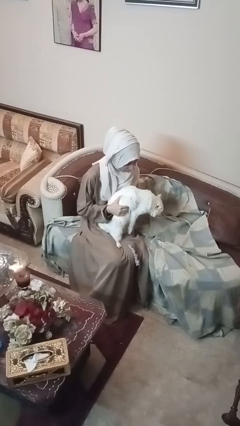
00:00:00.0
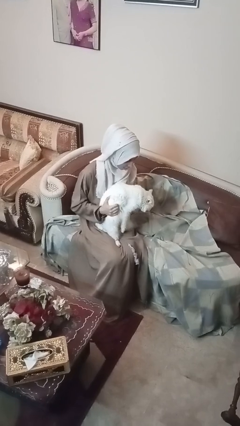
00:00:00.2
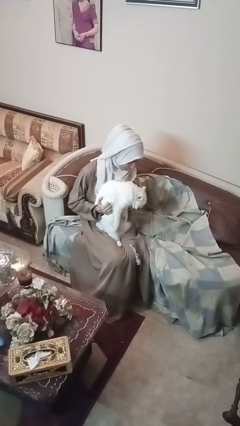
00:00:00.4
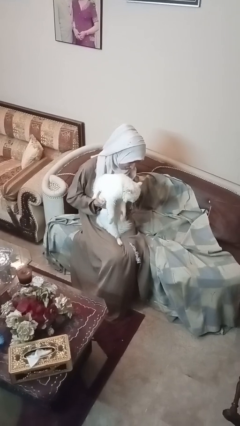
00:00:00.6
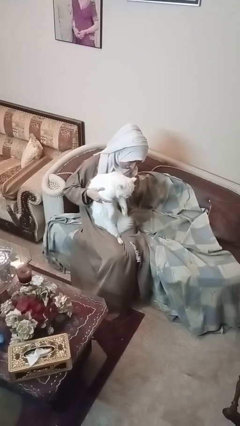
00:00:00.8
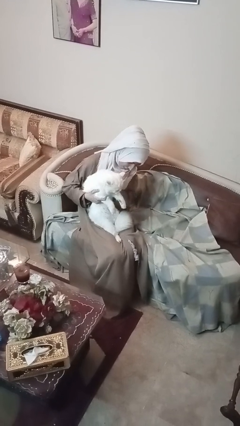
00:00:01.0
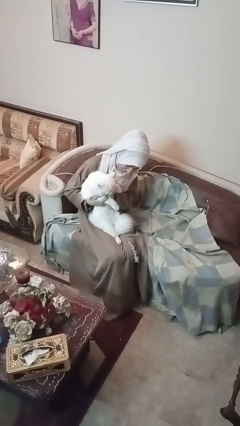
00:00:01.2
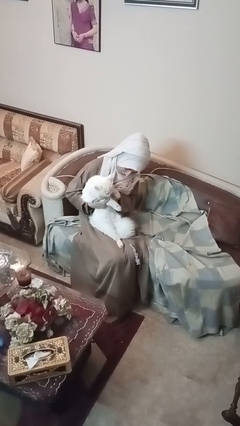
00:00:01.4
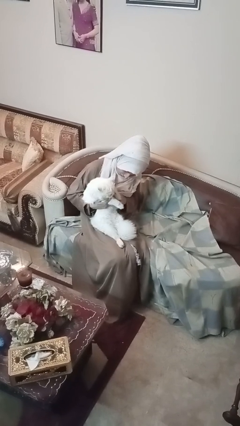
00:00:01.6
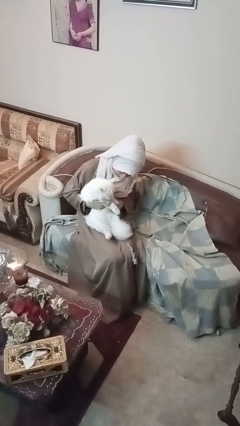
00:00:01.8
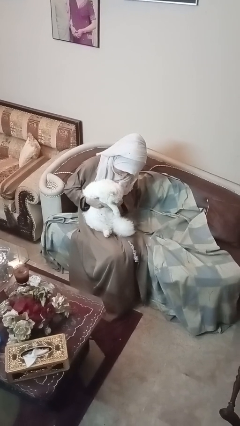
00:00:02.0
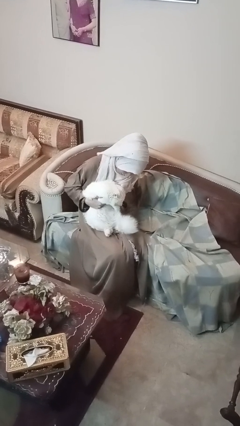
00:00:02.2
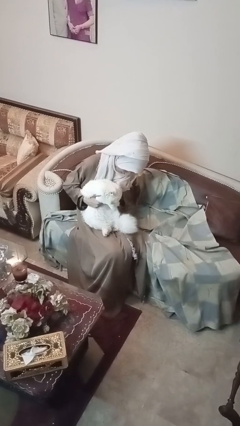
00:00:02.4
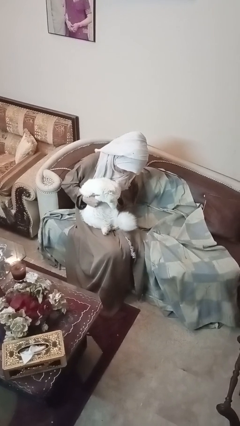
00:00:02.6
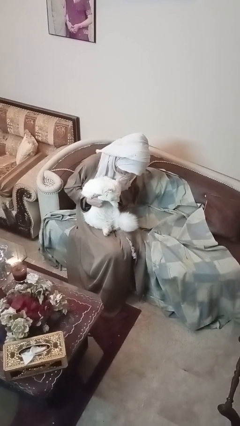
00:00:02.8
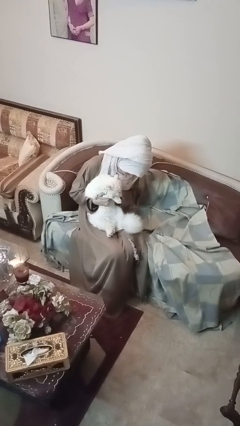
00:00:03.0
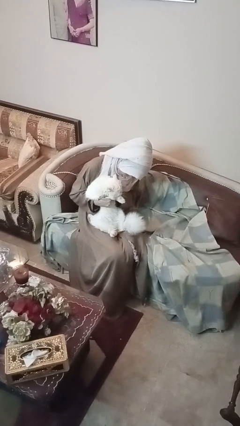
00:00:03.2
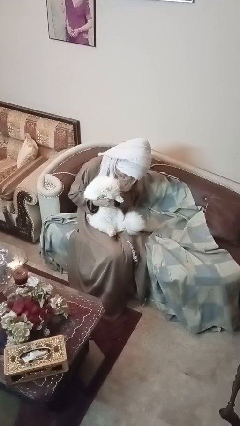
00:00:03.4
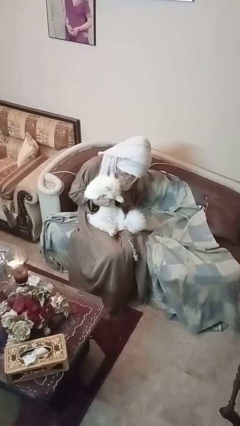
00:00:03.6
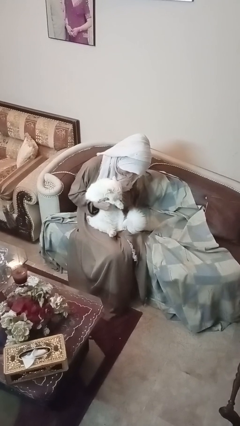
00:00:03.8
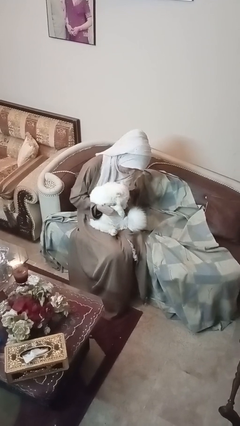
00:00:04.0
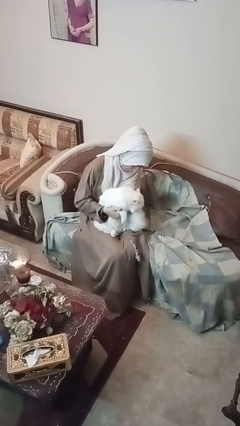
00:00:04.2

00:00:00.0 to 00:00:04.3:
person hugs cat

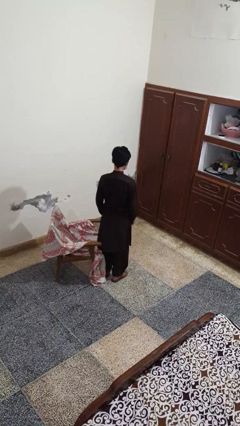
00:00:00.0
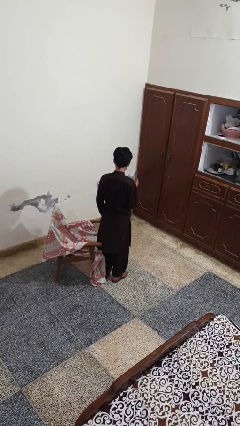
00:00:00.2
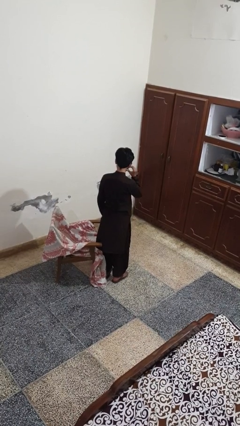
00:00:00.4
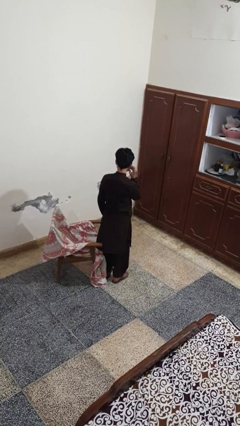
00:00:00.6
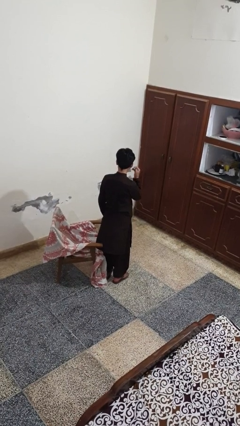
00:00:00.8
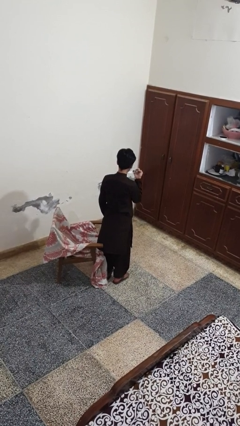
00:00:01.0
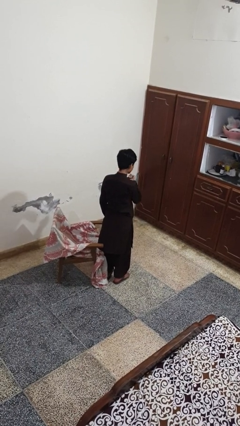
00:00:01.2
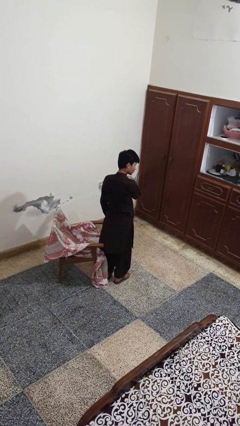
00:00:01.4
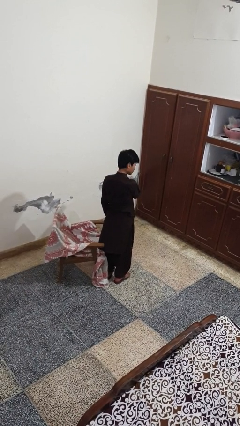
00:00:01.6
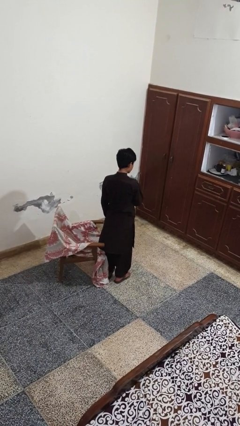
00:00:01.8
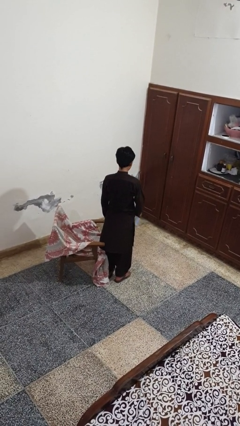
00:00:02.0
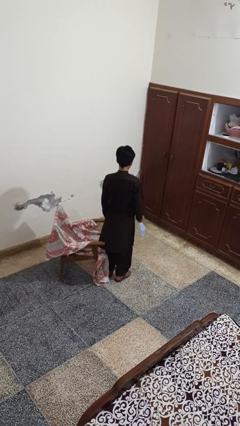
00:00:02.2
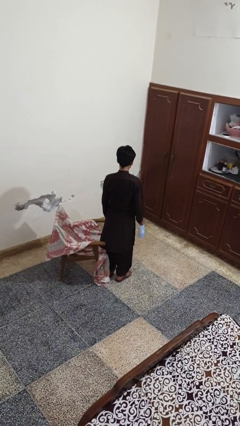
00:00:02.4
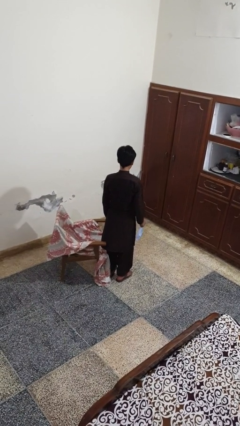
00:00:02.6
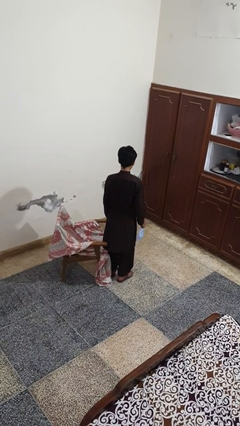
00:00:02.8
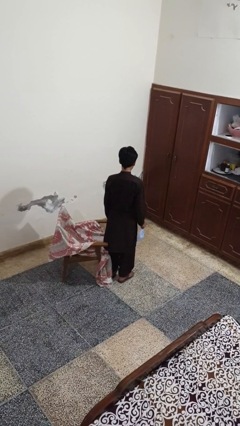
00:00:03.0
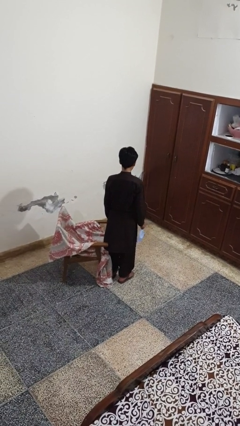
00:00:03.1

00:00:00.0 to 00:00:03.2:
person takes off facemask

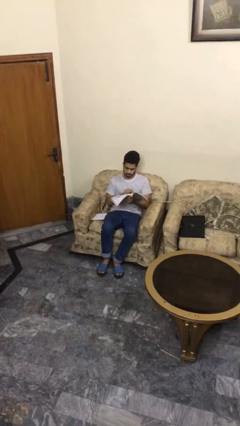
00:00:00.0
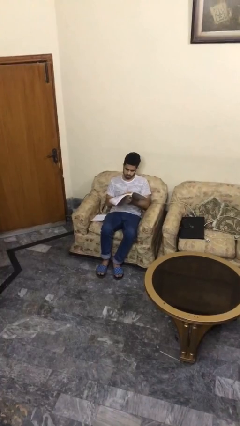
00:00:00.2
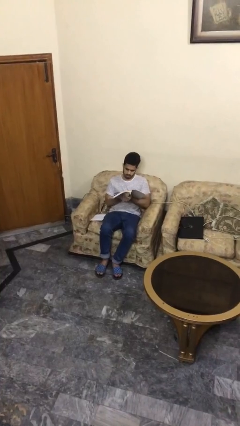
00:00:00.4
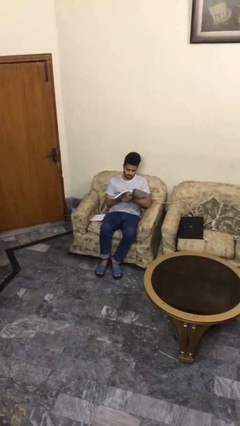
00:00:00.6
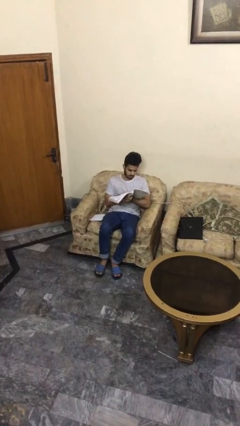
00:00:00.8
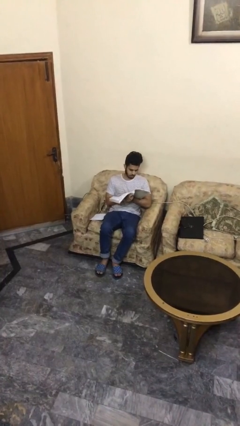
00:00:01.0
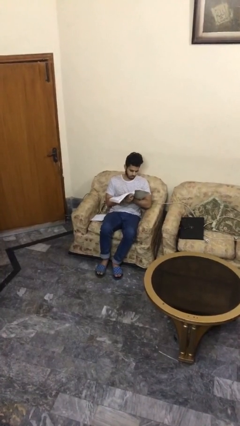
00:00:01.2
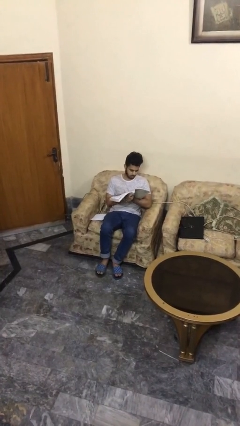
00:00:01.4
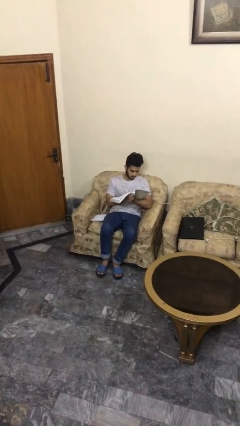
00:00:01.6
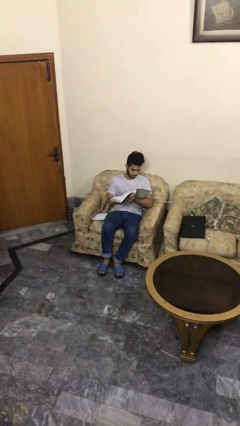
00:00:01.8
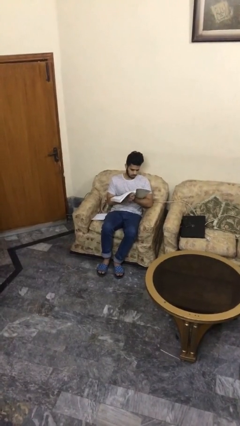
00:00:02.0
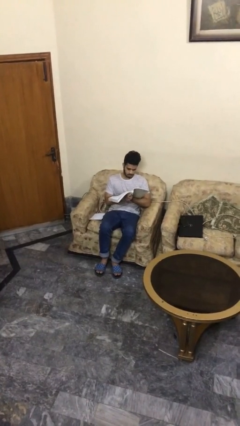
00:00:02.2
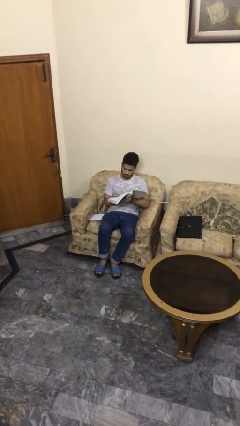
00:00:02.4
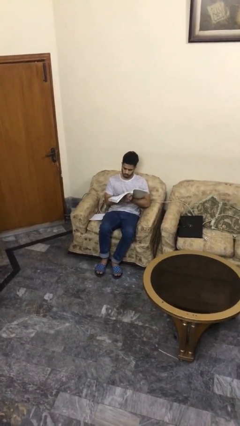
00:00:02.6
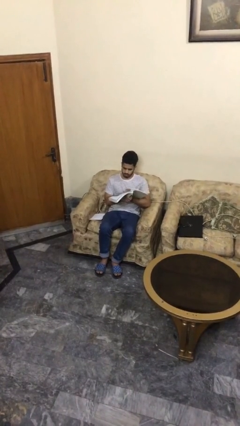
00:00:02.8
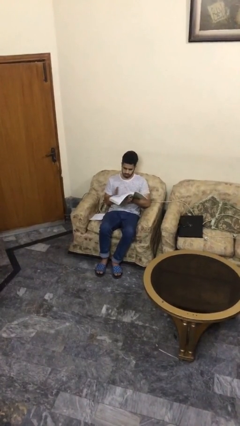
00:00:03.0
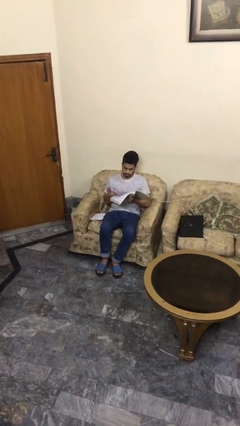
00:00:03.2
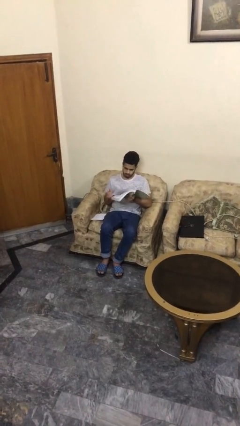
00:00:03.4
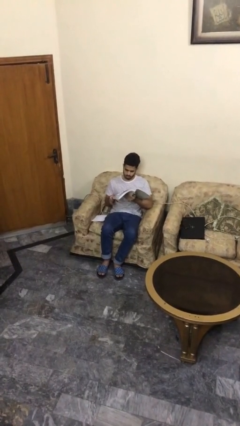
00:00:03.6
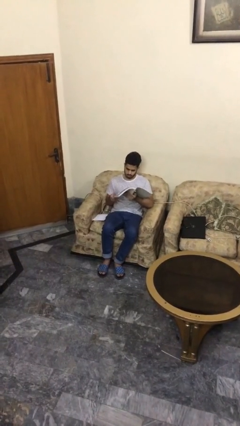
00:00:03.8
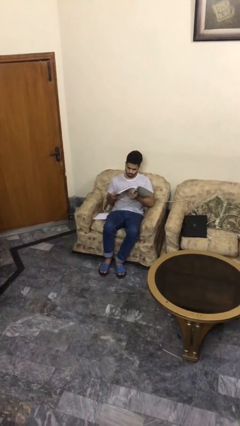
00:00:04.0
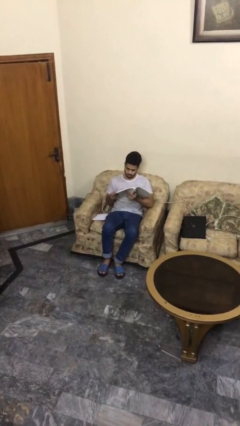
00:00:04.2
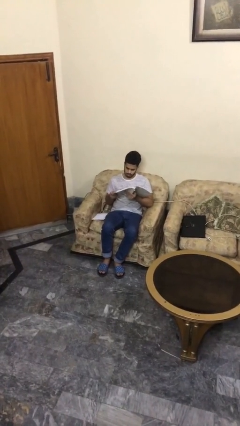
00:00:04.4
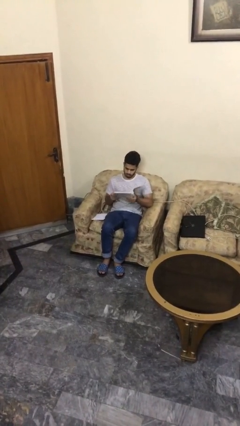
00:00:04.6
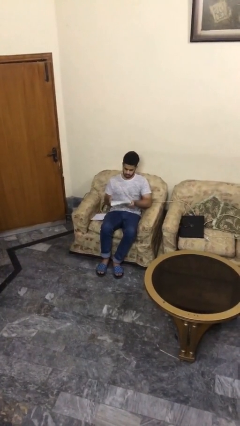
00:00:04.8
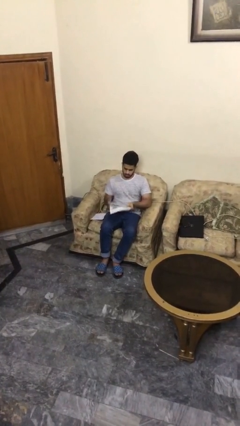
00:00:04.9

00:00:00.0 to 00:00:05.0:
person reads document

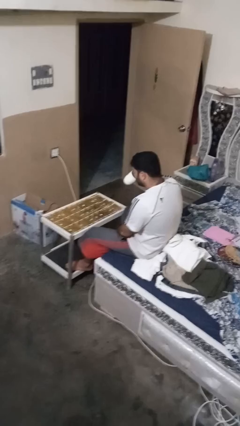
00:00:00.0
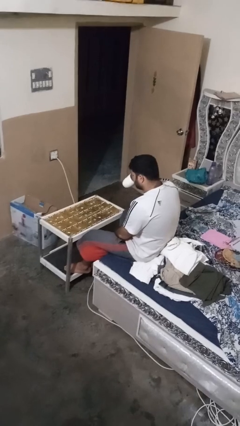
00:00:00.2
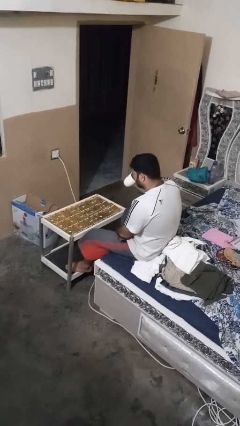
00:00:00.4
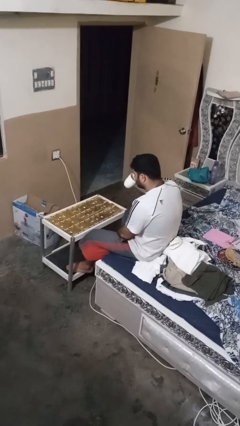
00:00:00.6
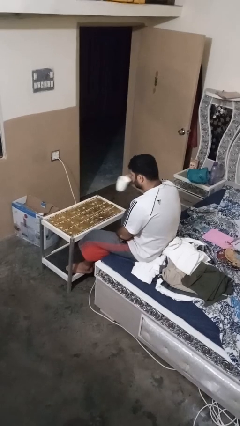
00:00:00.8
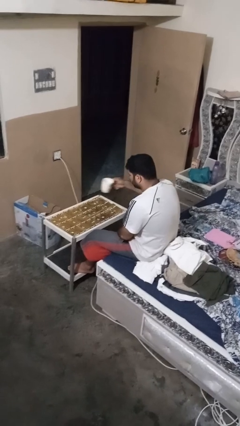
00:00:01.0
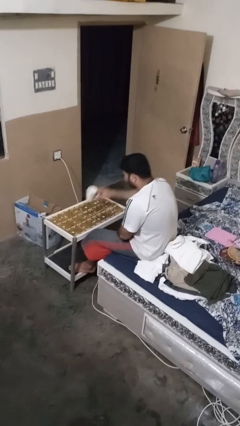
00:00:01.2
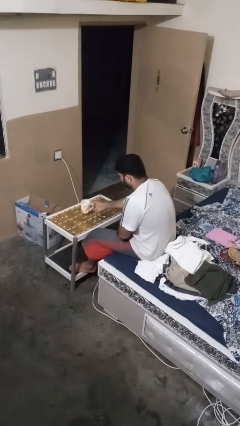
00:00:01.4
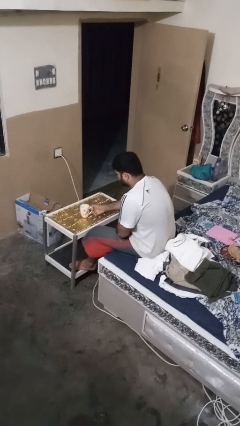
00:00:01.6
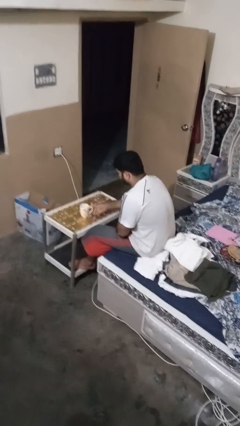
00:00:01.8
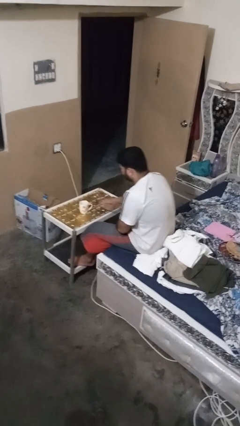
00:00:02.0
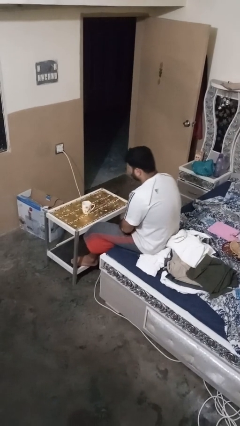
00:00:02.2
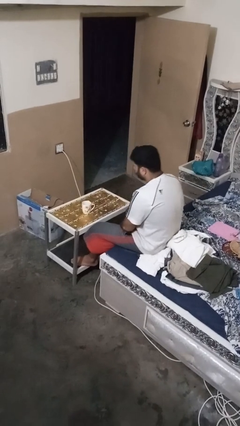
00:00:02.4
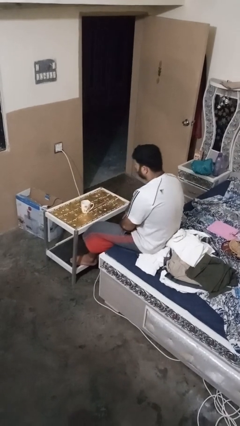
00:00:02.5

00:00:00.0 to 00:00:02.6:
person puts down object on table

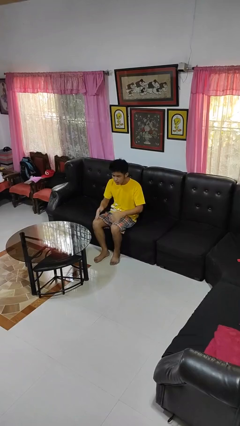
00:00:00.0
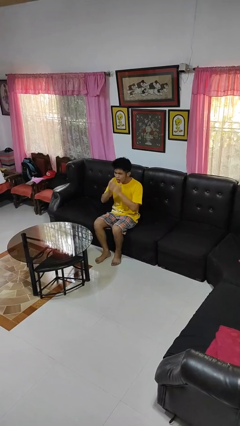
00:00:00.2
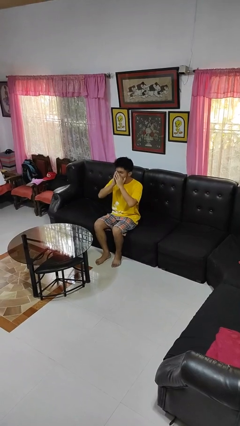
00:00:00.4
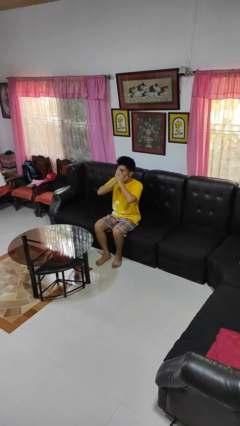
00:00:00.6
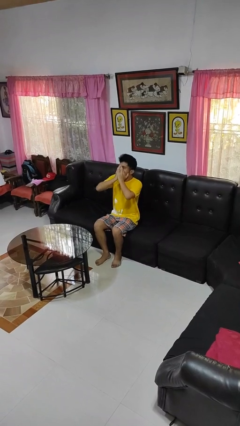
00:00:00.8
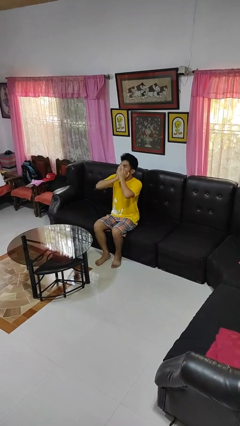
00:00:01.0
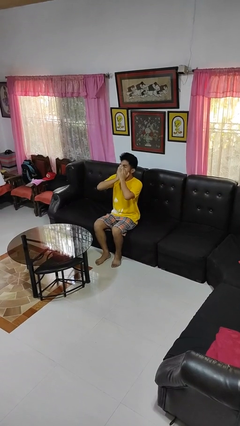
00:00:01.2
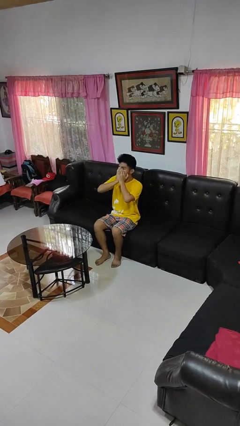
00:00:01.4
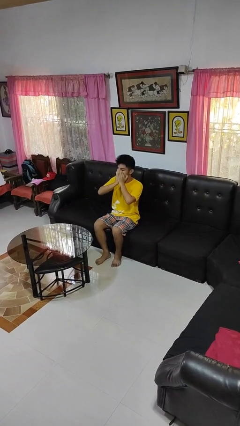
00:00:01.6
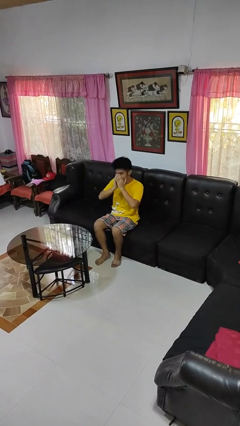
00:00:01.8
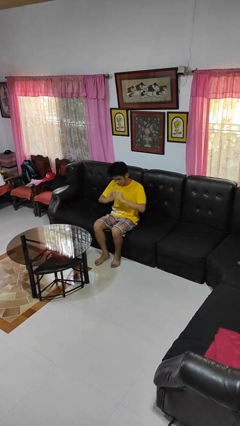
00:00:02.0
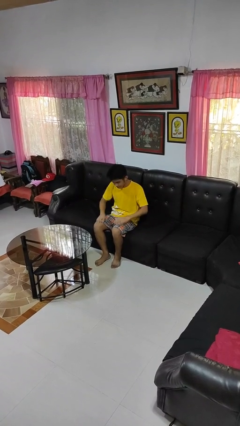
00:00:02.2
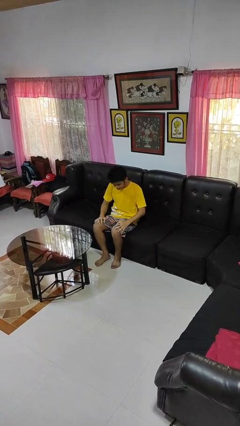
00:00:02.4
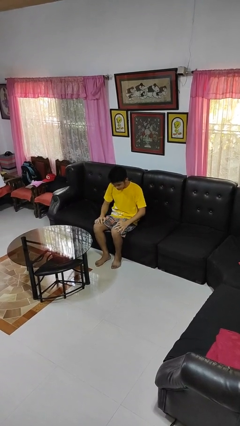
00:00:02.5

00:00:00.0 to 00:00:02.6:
person yawns
